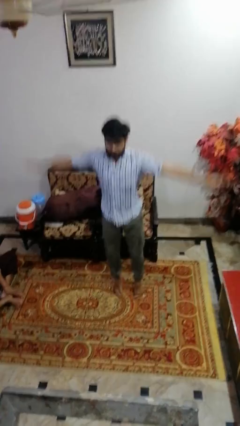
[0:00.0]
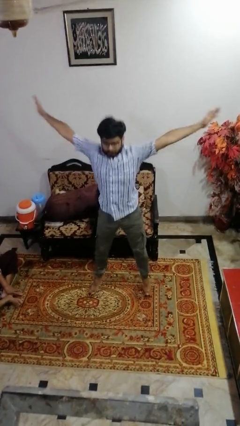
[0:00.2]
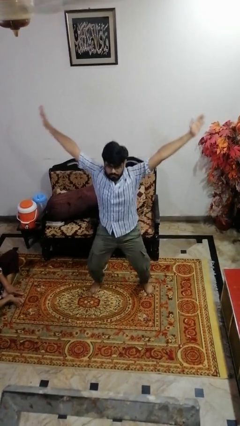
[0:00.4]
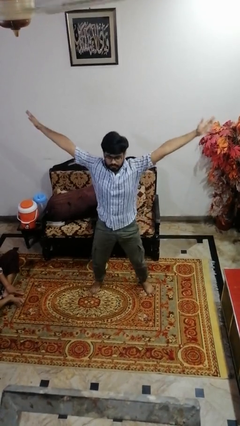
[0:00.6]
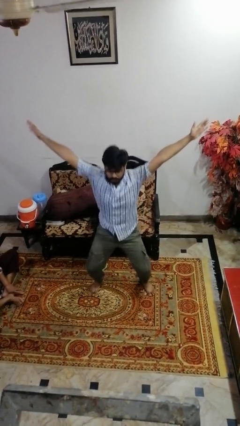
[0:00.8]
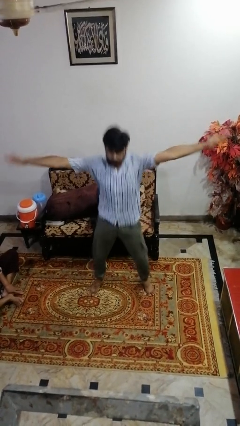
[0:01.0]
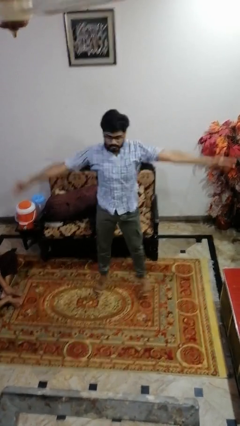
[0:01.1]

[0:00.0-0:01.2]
person exercises with jumping jacks

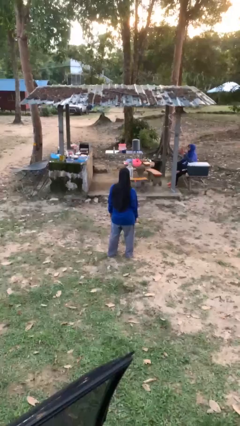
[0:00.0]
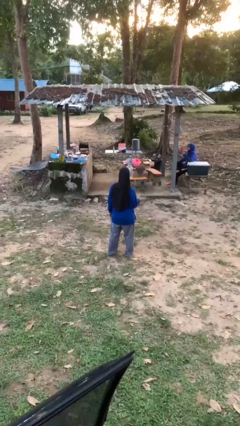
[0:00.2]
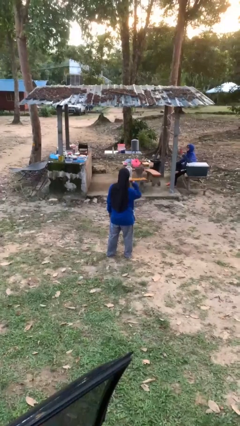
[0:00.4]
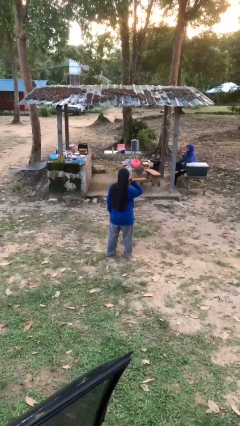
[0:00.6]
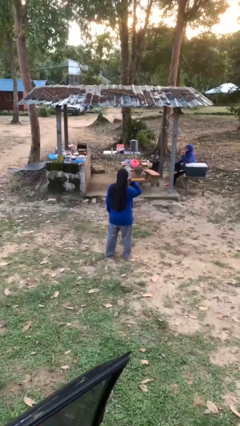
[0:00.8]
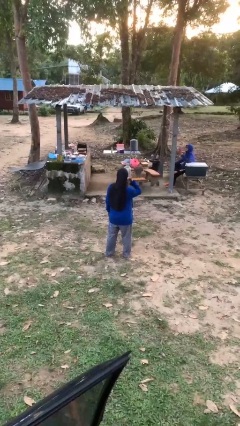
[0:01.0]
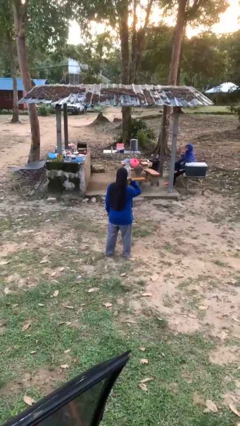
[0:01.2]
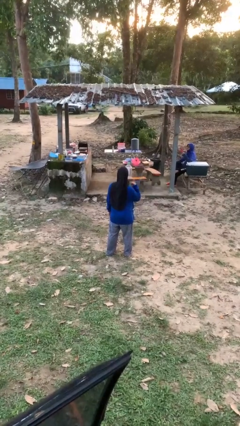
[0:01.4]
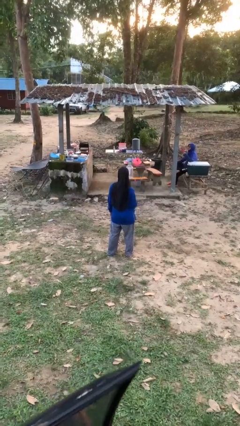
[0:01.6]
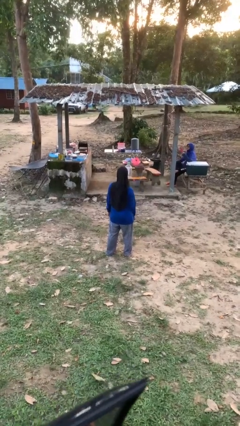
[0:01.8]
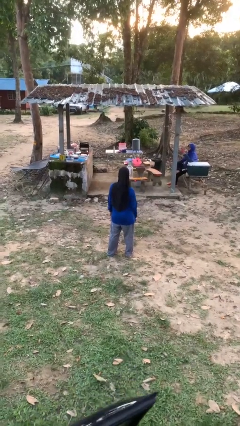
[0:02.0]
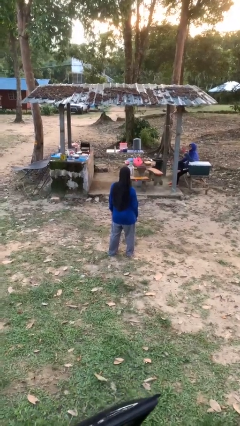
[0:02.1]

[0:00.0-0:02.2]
person gestures call me

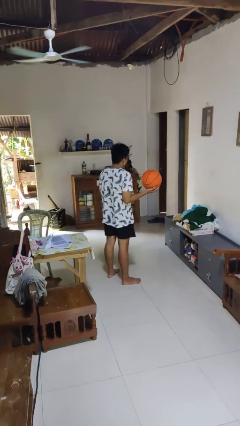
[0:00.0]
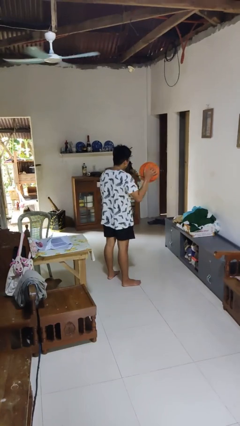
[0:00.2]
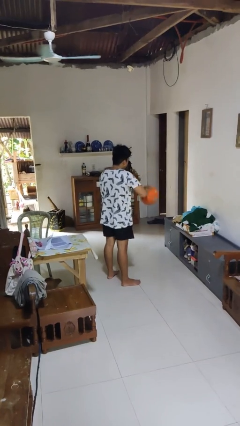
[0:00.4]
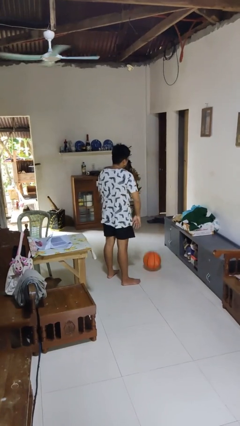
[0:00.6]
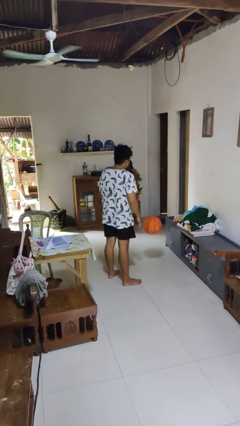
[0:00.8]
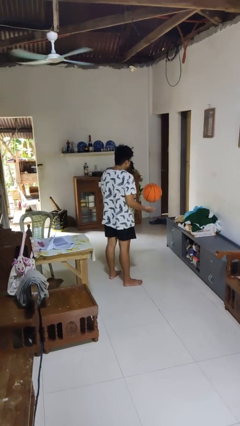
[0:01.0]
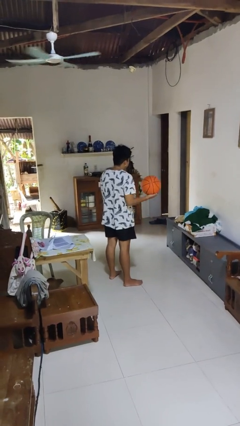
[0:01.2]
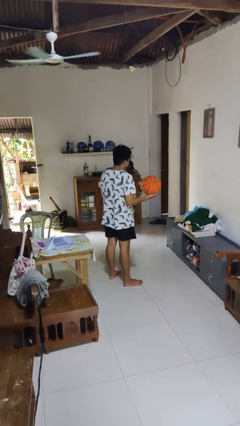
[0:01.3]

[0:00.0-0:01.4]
person bounces ball on floor

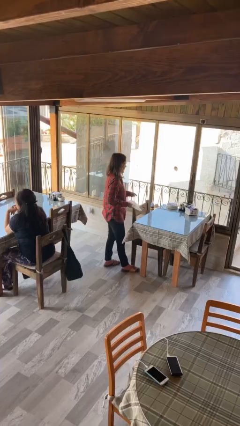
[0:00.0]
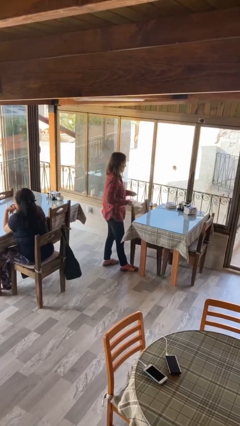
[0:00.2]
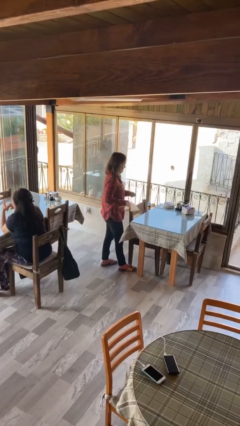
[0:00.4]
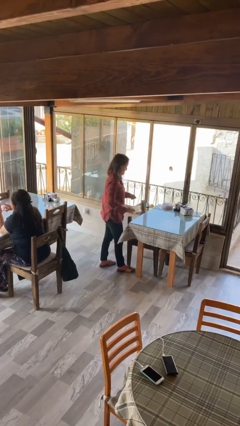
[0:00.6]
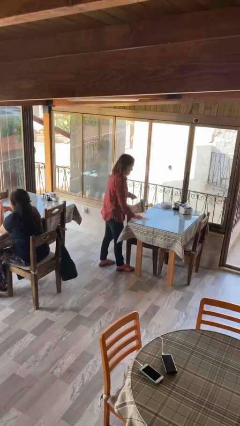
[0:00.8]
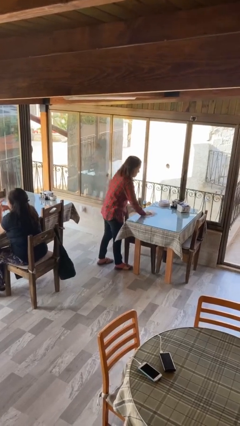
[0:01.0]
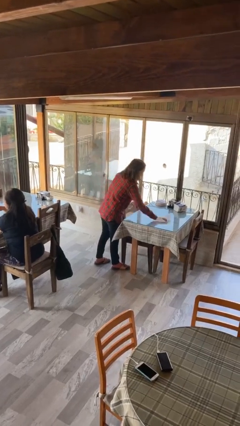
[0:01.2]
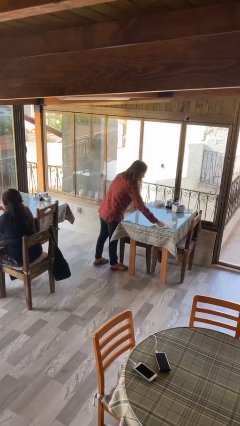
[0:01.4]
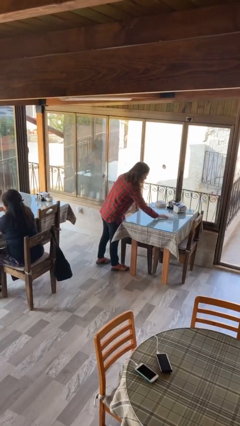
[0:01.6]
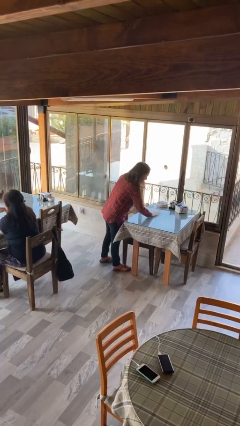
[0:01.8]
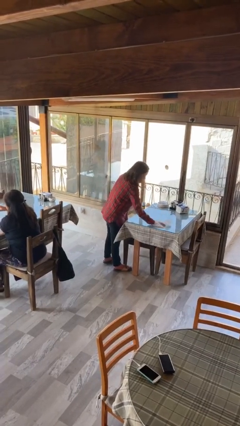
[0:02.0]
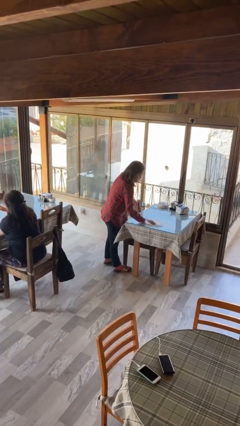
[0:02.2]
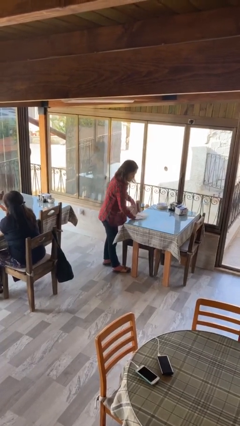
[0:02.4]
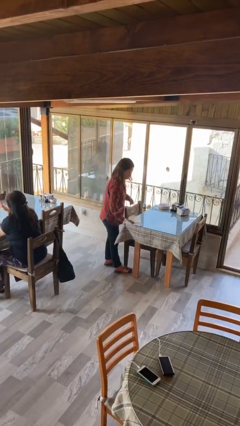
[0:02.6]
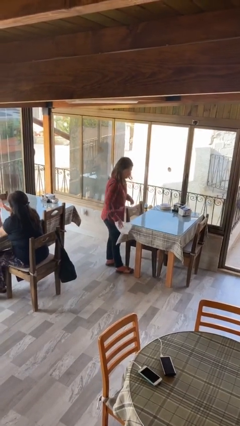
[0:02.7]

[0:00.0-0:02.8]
person cleans table with rag

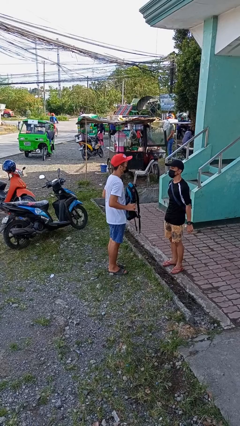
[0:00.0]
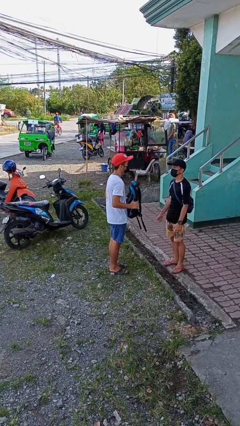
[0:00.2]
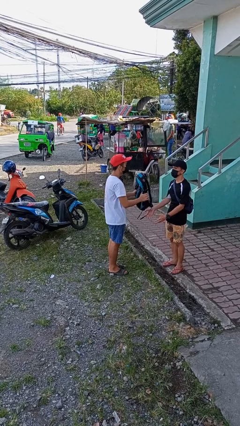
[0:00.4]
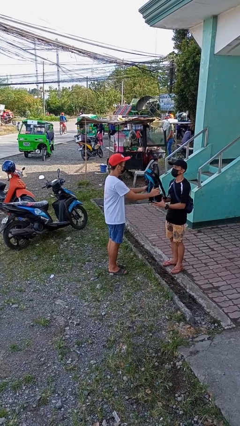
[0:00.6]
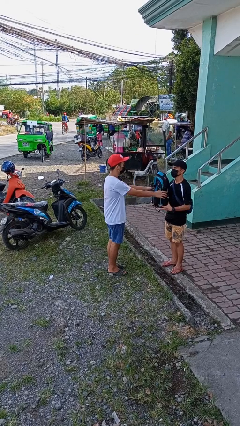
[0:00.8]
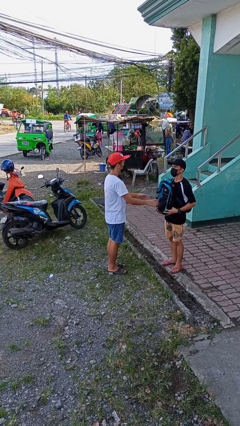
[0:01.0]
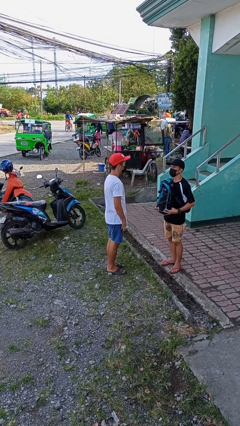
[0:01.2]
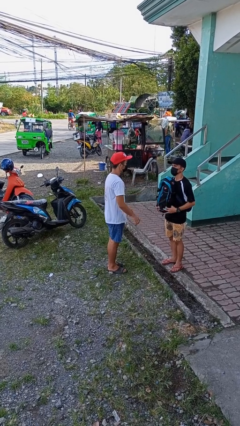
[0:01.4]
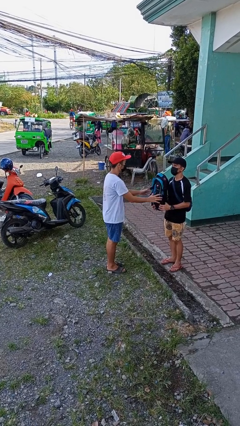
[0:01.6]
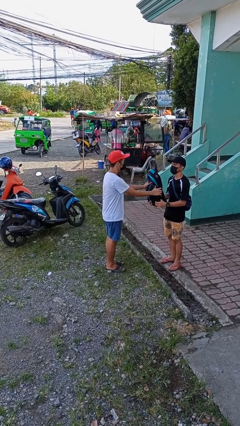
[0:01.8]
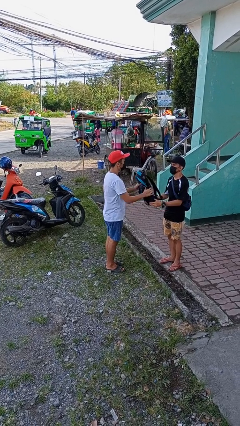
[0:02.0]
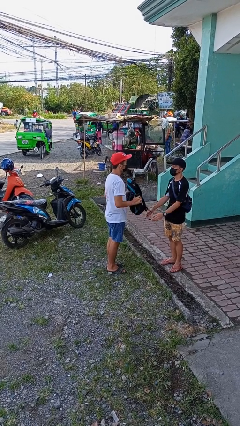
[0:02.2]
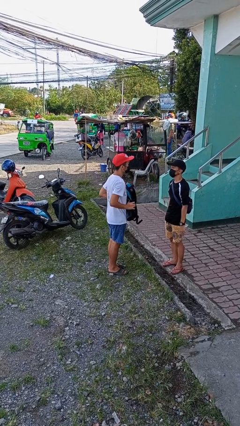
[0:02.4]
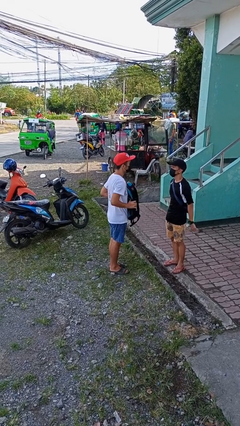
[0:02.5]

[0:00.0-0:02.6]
person transfers object to person

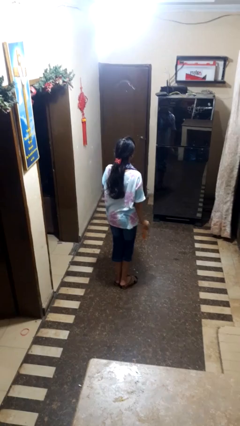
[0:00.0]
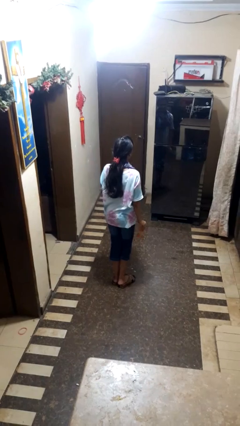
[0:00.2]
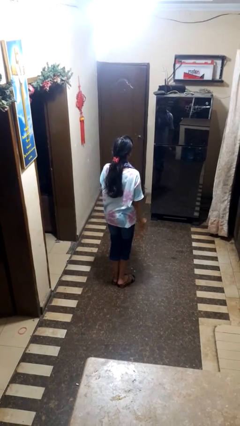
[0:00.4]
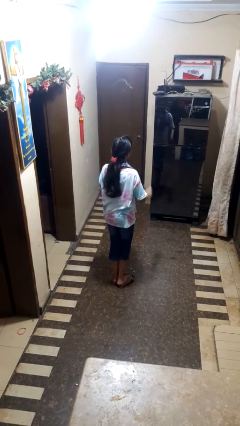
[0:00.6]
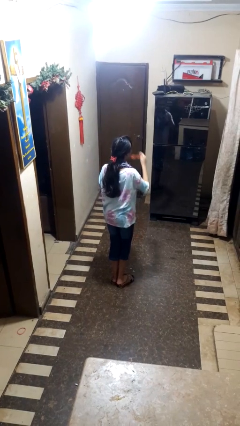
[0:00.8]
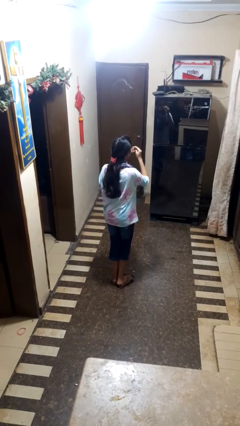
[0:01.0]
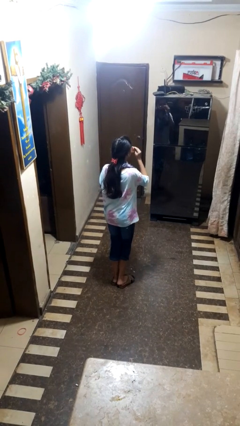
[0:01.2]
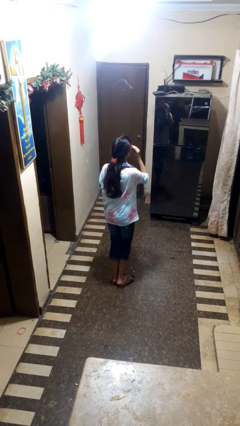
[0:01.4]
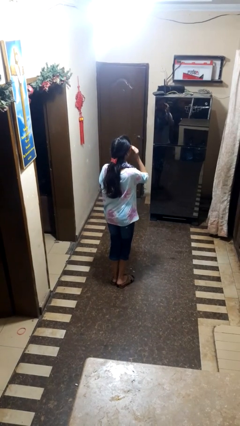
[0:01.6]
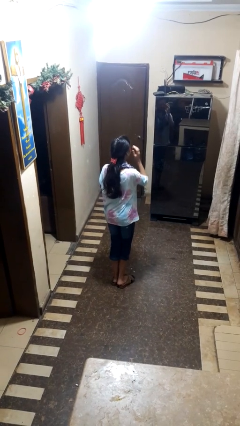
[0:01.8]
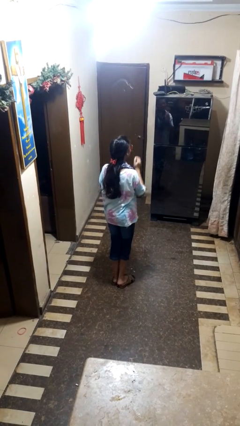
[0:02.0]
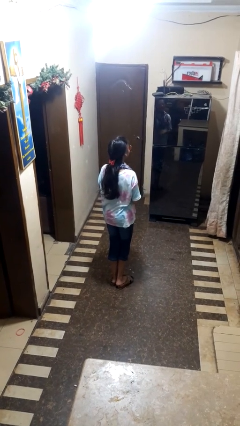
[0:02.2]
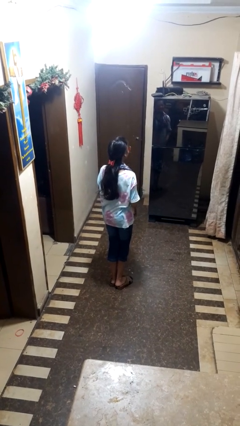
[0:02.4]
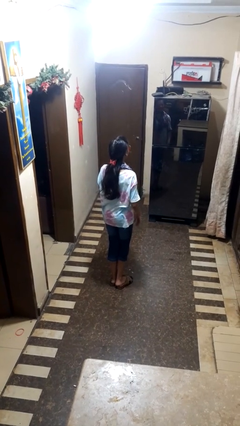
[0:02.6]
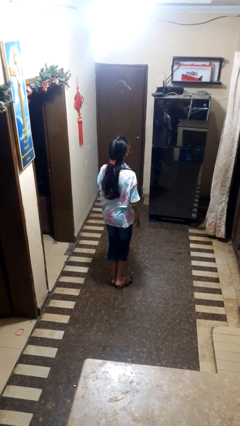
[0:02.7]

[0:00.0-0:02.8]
person puts on sunglasses

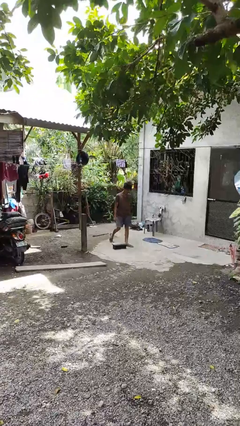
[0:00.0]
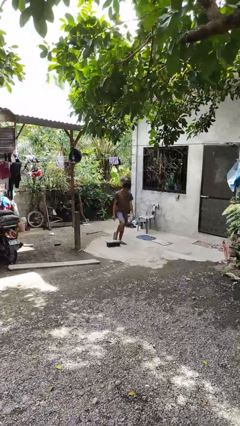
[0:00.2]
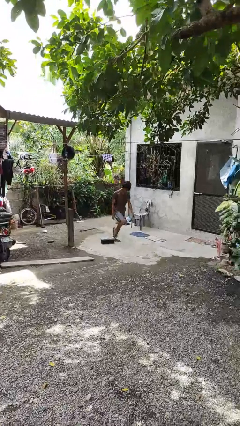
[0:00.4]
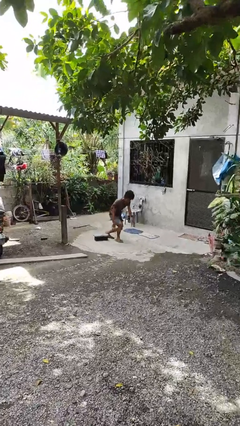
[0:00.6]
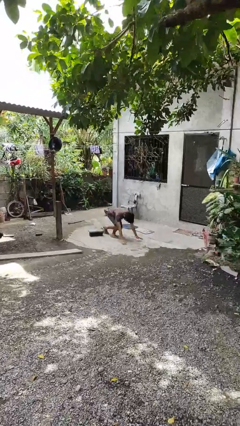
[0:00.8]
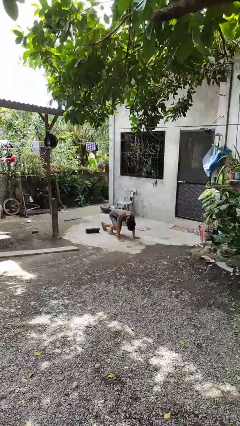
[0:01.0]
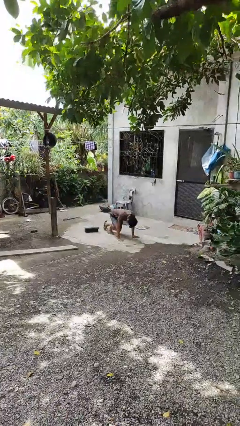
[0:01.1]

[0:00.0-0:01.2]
person trips on object on floor

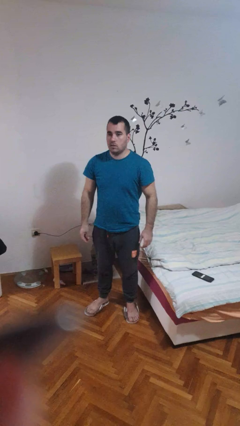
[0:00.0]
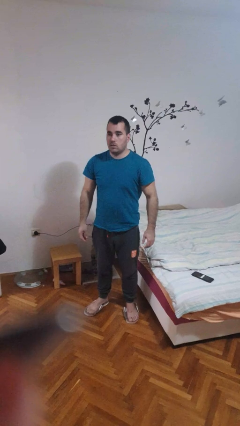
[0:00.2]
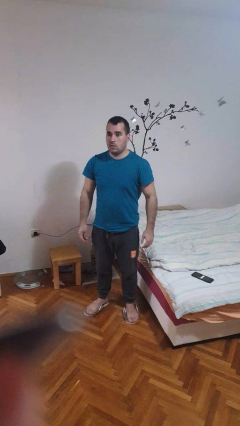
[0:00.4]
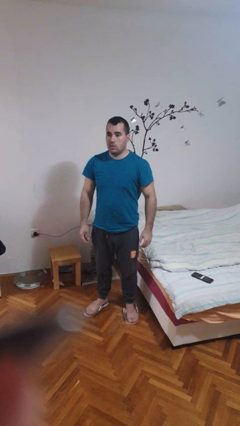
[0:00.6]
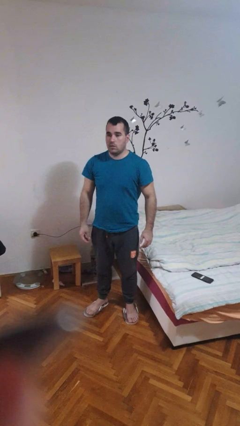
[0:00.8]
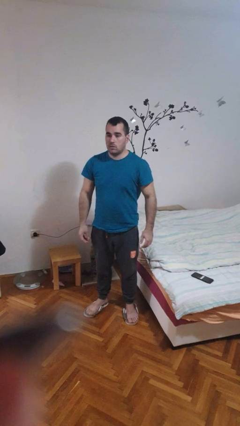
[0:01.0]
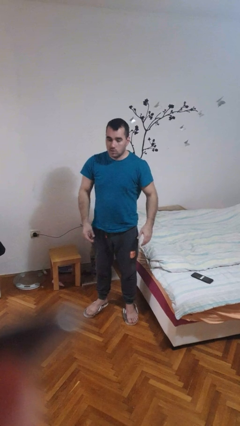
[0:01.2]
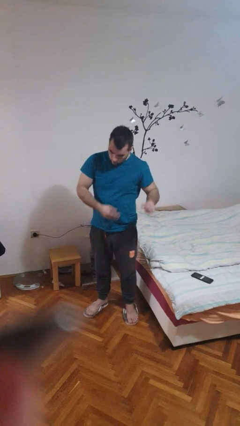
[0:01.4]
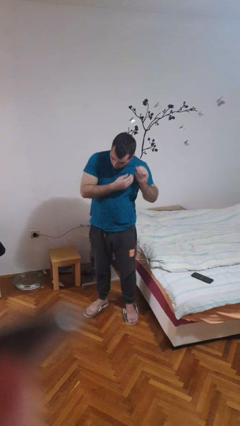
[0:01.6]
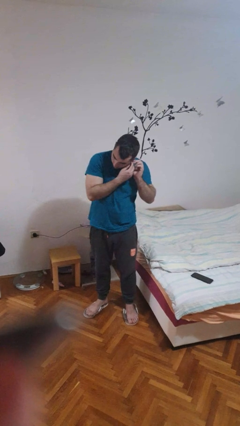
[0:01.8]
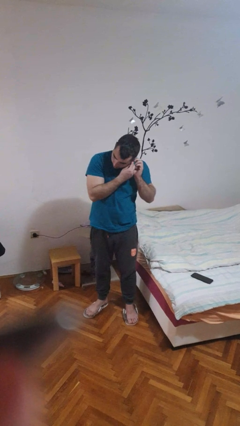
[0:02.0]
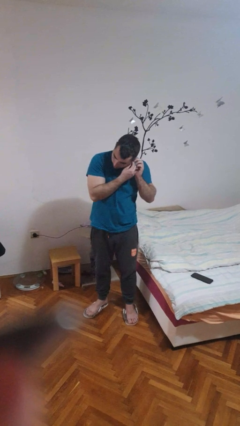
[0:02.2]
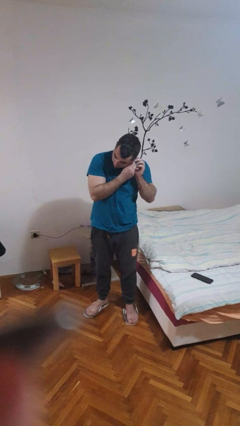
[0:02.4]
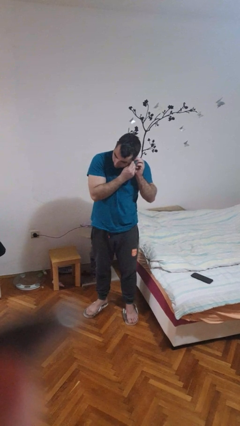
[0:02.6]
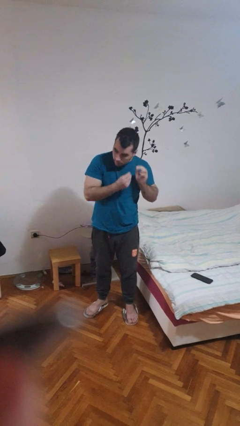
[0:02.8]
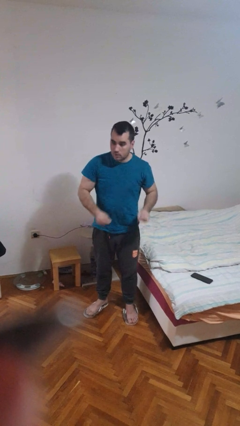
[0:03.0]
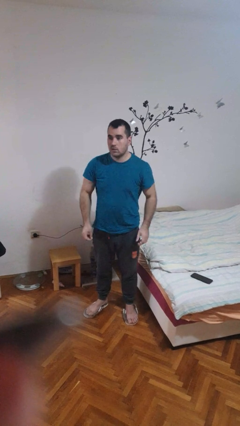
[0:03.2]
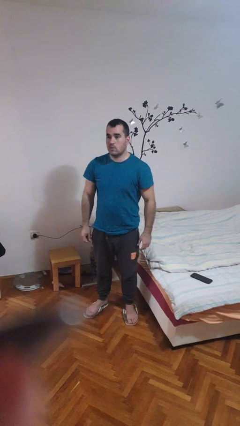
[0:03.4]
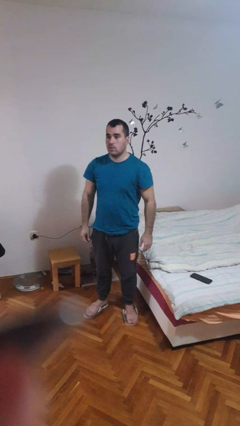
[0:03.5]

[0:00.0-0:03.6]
person takes off earrings
